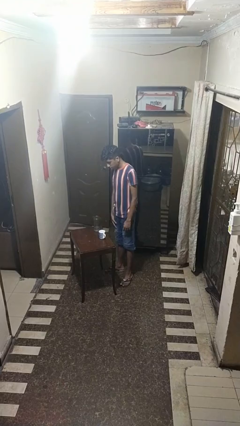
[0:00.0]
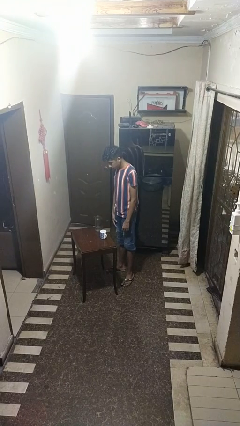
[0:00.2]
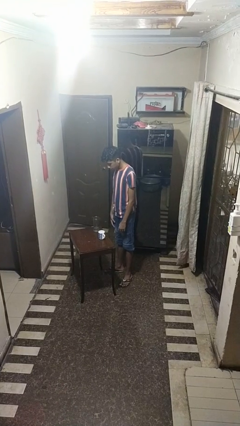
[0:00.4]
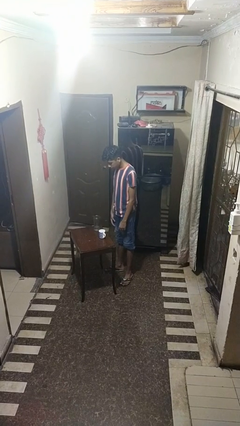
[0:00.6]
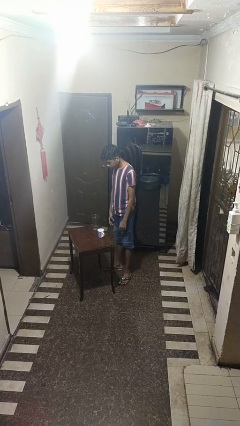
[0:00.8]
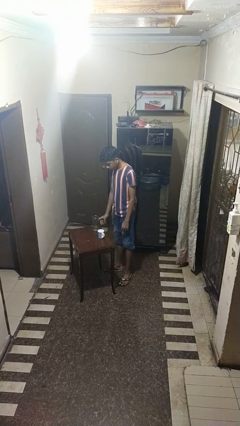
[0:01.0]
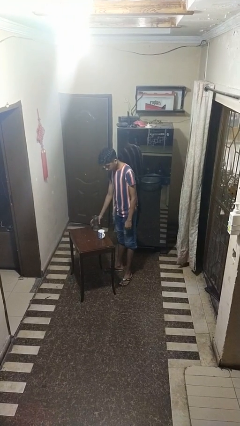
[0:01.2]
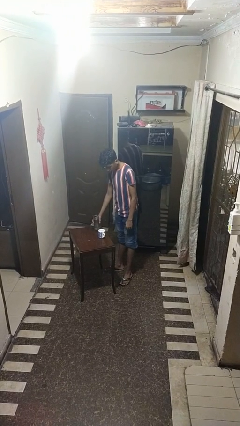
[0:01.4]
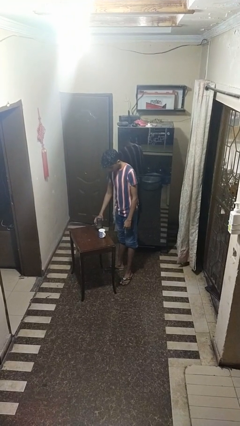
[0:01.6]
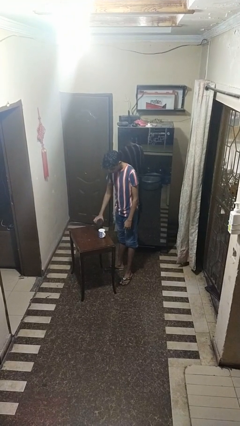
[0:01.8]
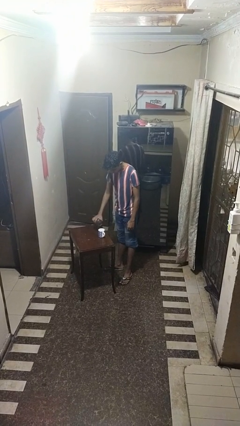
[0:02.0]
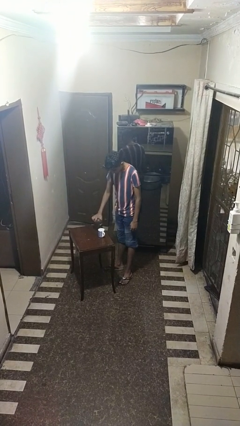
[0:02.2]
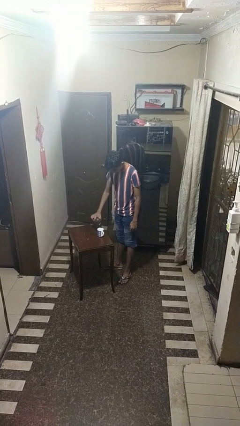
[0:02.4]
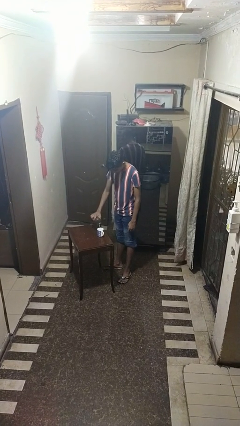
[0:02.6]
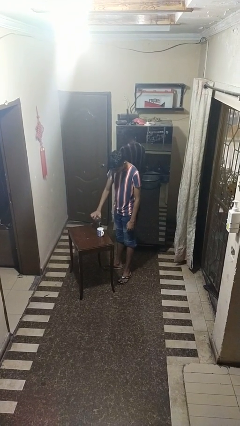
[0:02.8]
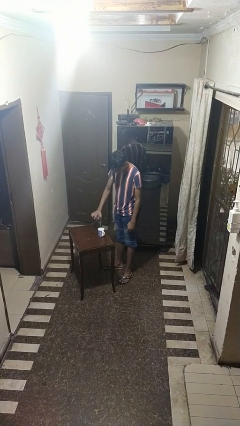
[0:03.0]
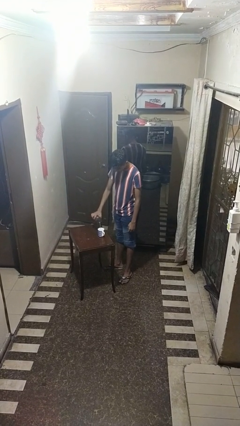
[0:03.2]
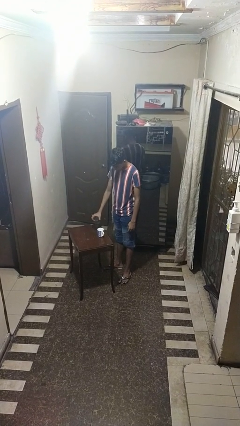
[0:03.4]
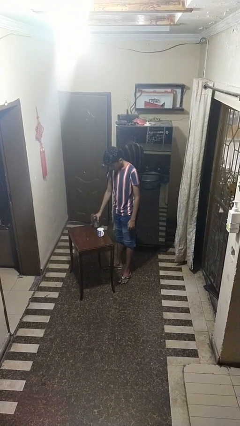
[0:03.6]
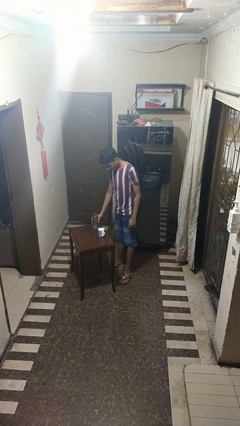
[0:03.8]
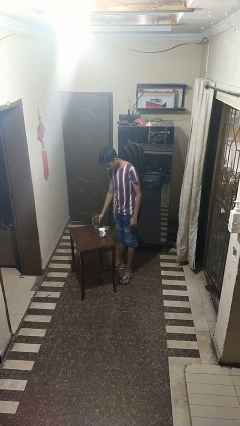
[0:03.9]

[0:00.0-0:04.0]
person pours liquid into cup

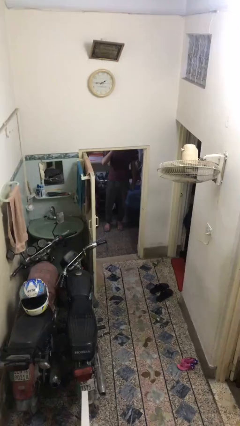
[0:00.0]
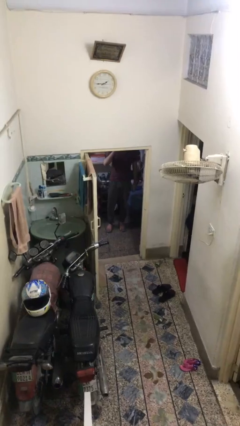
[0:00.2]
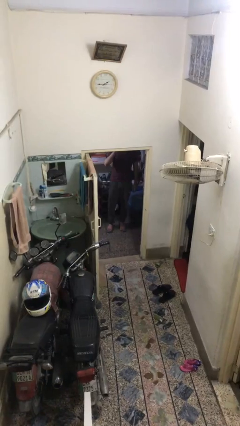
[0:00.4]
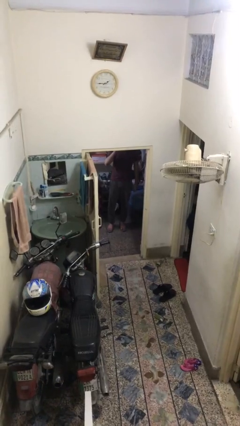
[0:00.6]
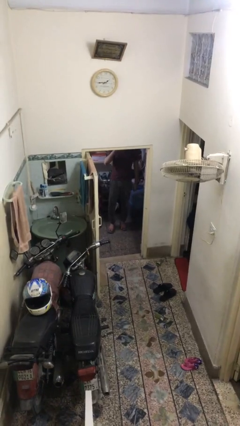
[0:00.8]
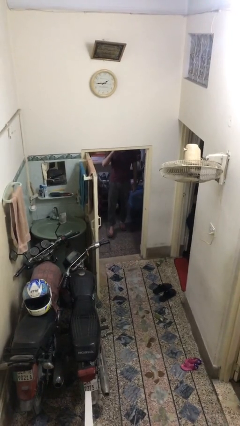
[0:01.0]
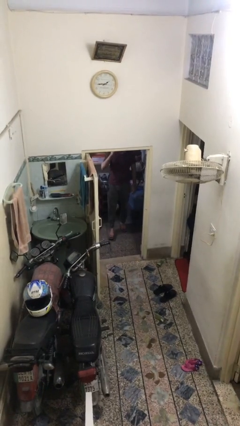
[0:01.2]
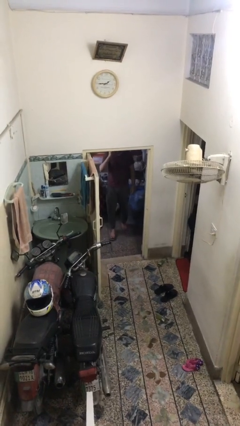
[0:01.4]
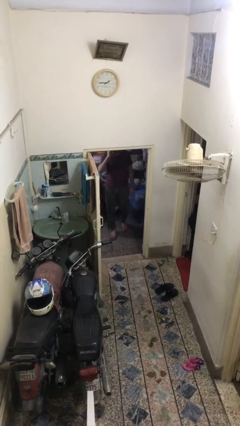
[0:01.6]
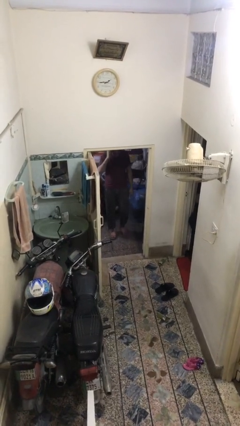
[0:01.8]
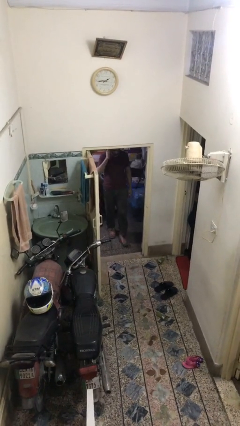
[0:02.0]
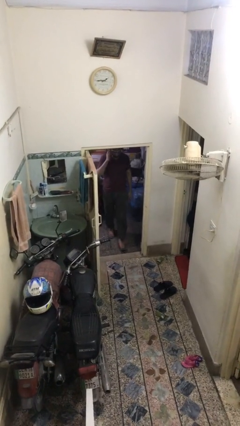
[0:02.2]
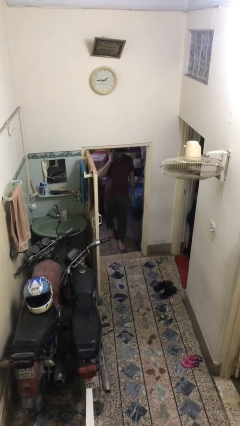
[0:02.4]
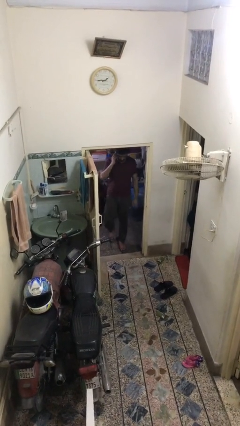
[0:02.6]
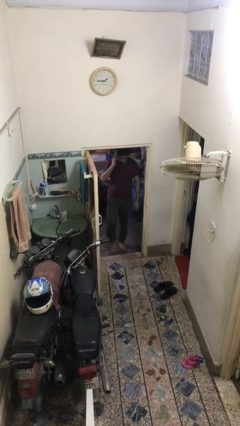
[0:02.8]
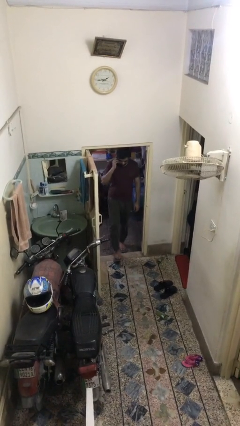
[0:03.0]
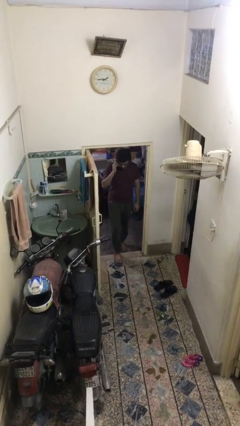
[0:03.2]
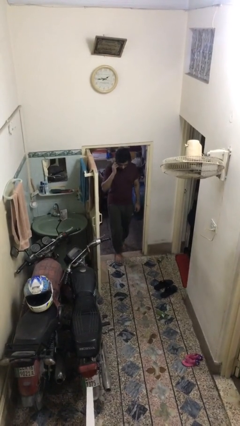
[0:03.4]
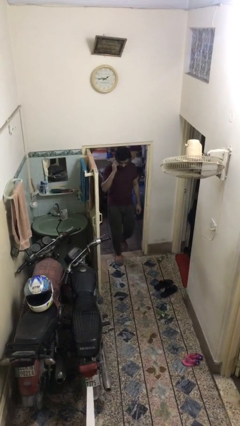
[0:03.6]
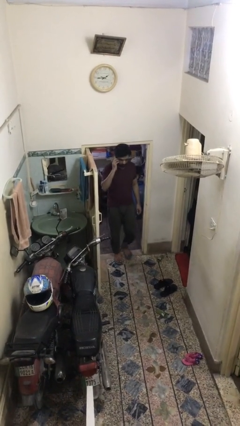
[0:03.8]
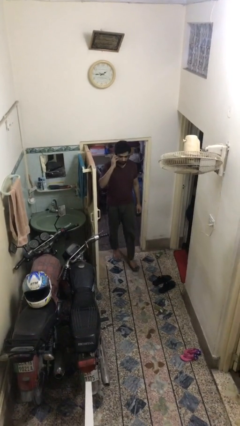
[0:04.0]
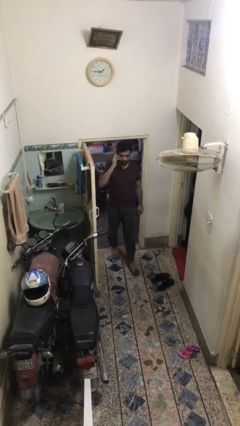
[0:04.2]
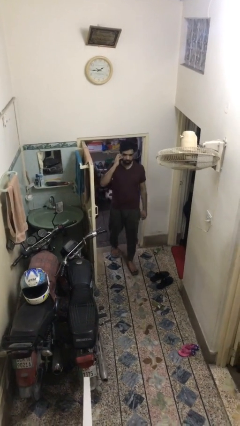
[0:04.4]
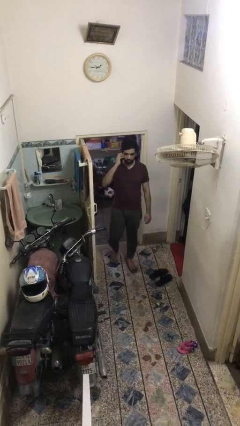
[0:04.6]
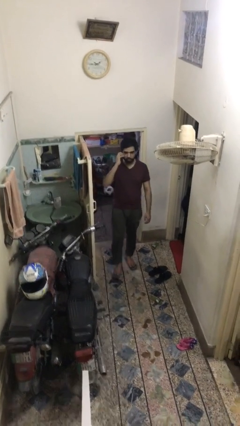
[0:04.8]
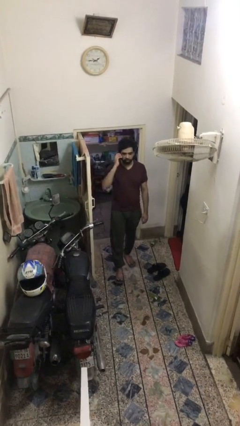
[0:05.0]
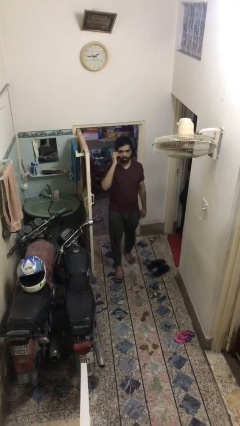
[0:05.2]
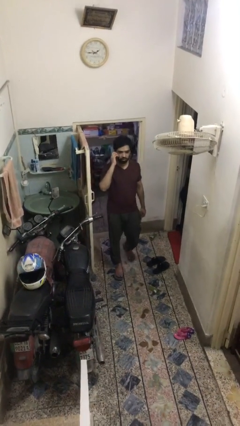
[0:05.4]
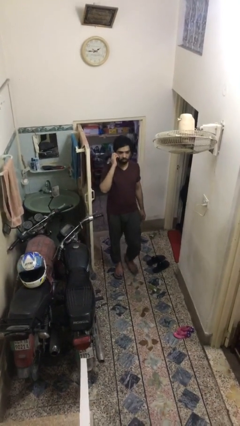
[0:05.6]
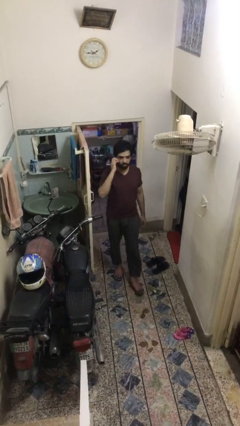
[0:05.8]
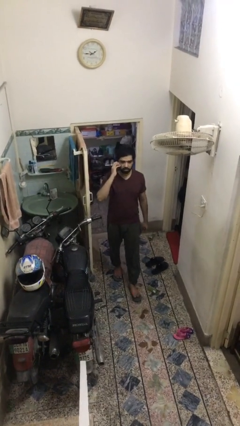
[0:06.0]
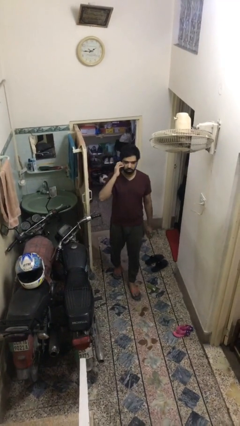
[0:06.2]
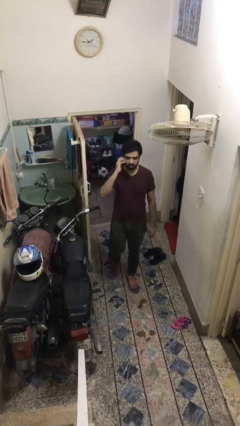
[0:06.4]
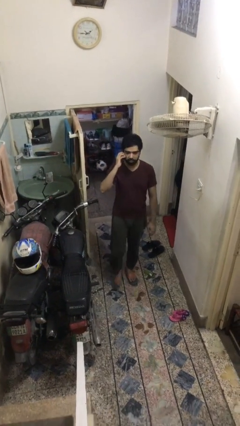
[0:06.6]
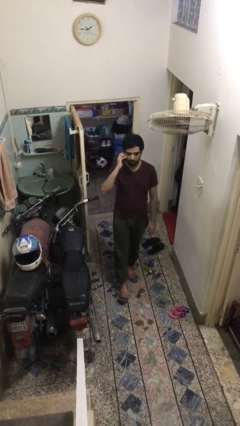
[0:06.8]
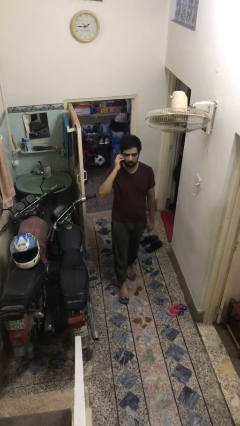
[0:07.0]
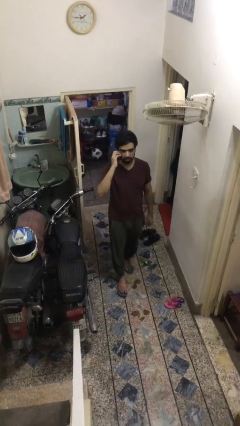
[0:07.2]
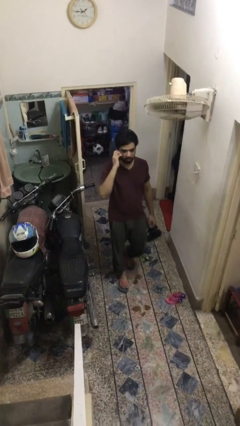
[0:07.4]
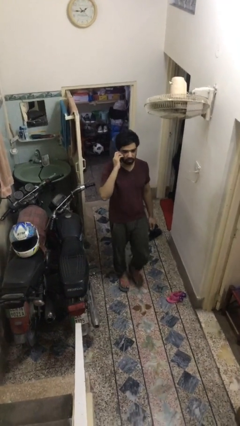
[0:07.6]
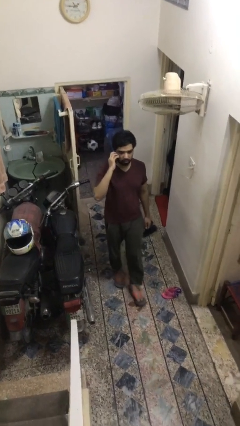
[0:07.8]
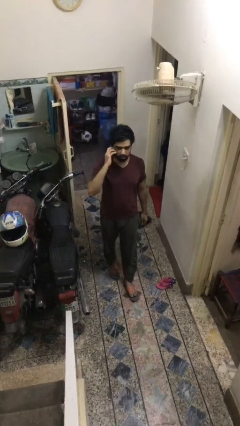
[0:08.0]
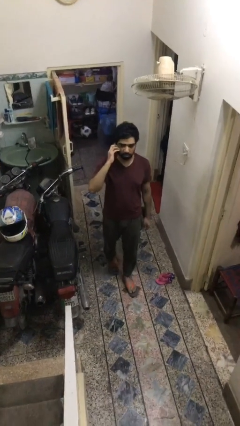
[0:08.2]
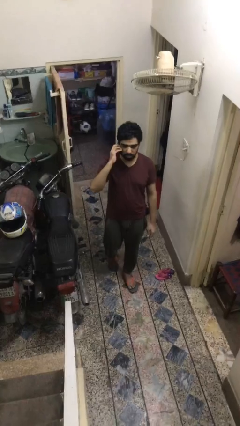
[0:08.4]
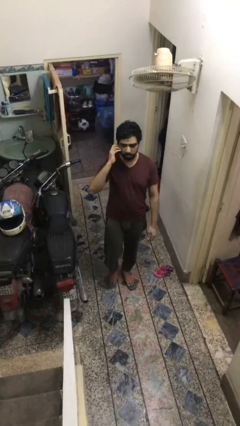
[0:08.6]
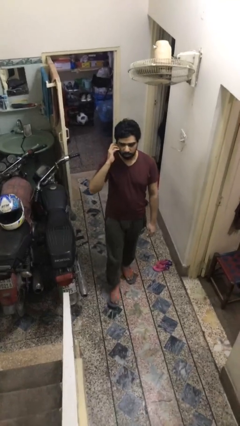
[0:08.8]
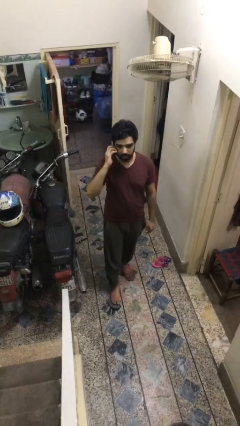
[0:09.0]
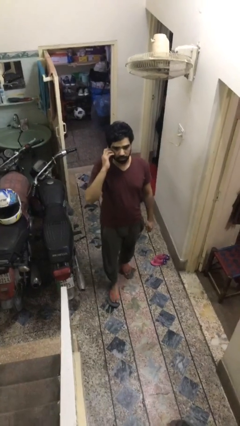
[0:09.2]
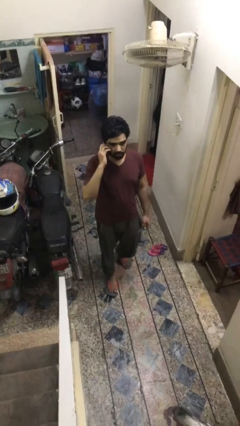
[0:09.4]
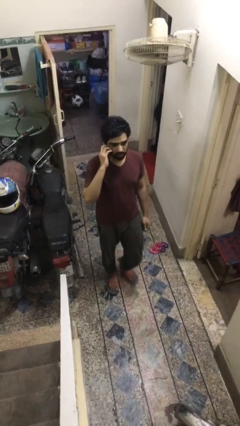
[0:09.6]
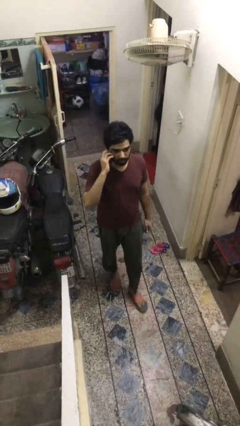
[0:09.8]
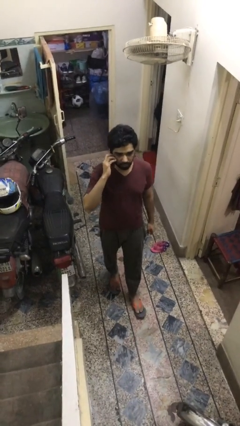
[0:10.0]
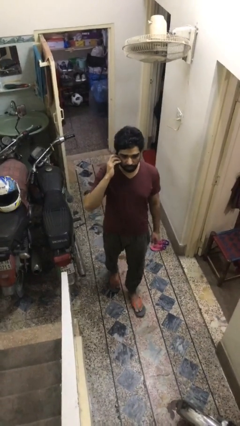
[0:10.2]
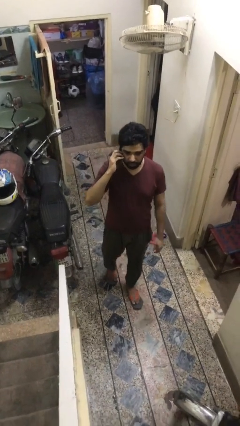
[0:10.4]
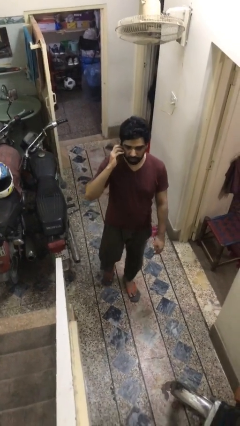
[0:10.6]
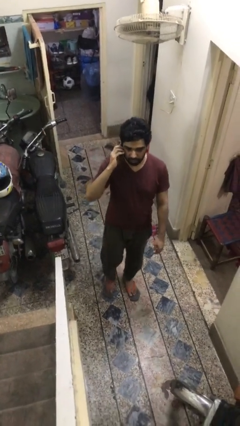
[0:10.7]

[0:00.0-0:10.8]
person enters scene through structure

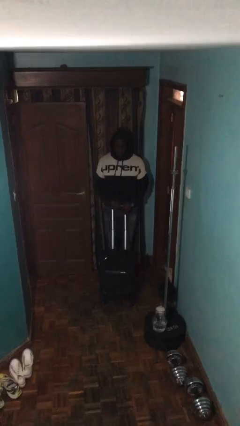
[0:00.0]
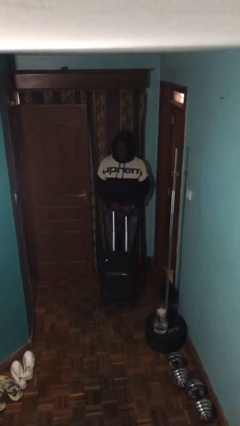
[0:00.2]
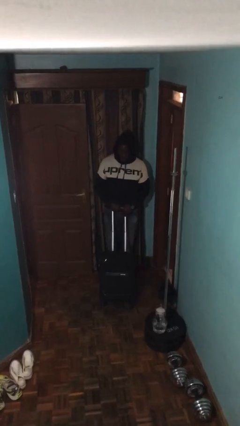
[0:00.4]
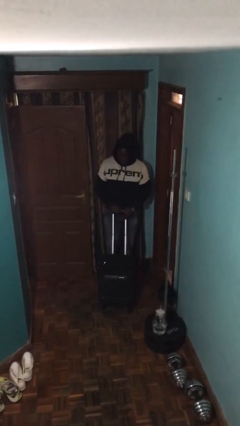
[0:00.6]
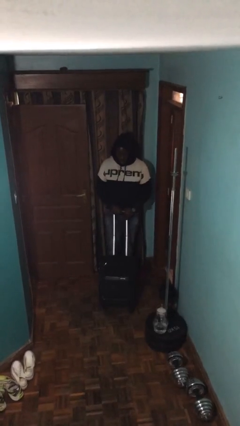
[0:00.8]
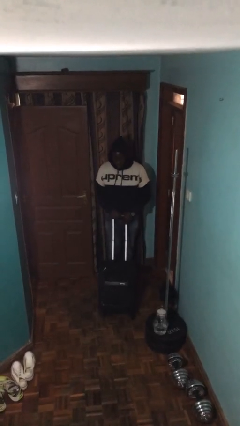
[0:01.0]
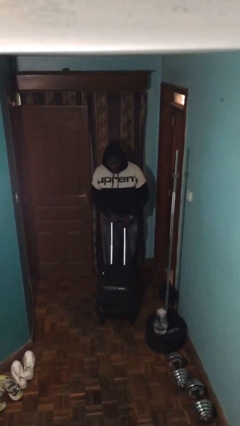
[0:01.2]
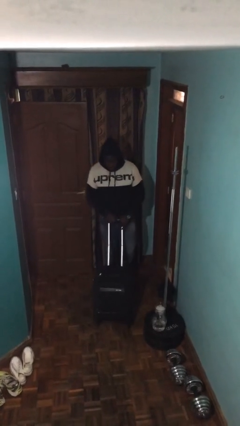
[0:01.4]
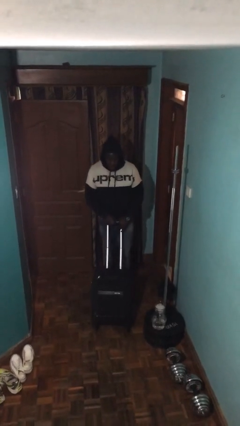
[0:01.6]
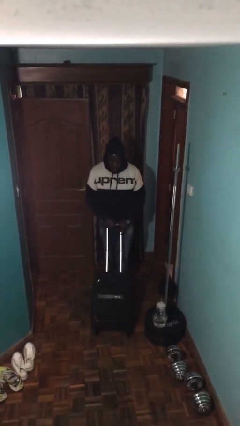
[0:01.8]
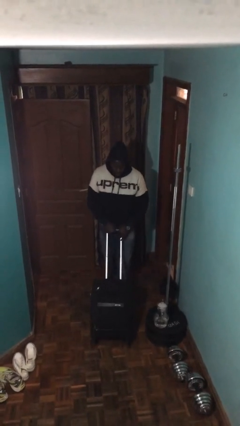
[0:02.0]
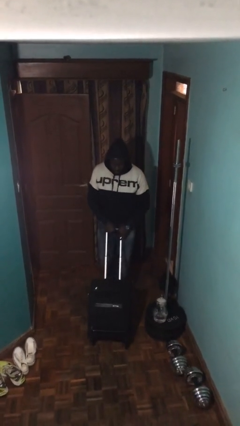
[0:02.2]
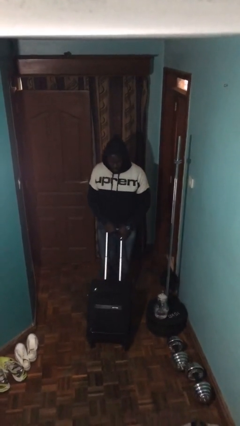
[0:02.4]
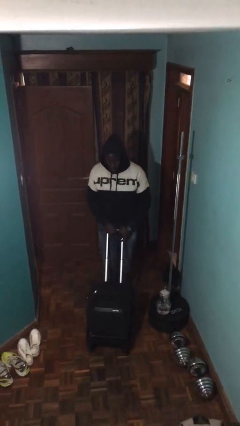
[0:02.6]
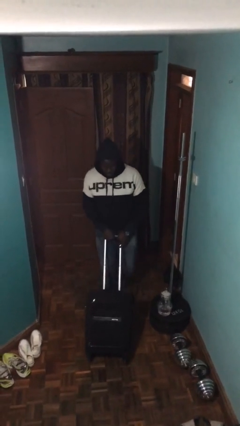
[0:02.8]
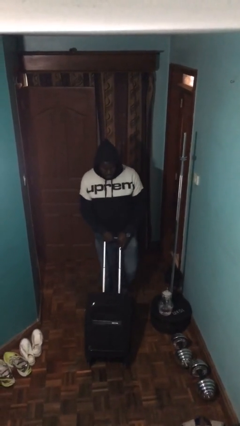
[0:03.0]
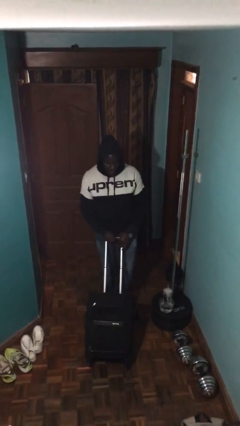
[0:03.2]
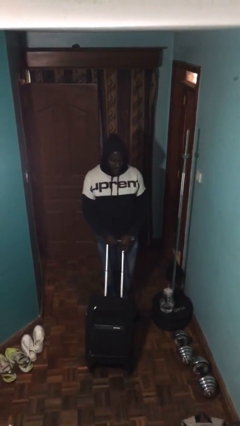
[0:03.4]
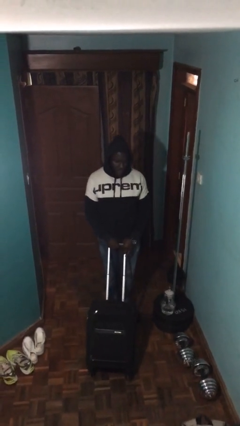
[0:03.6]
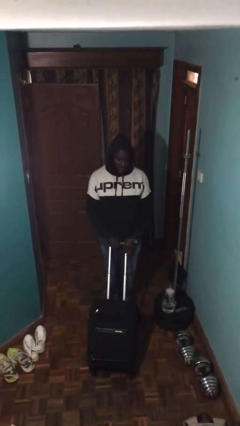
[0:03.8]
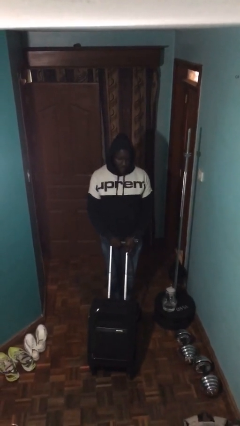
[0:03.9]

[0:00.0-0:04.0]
person pushes wheeled cart
